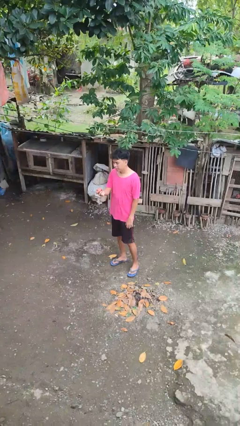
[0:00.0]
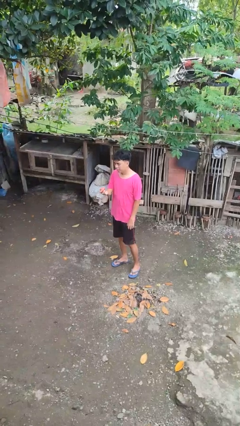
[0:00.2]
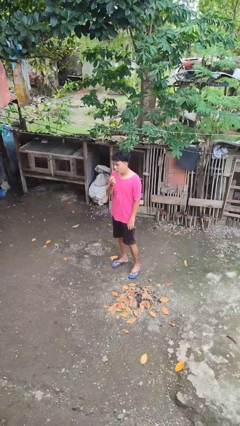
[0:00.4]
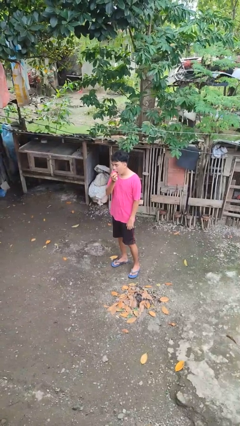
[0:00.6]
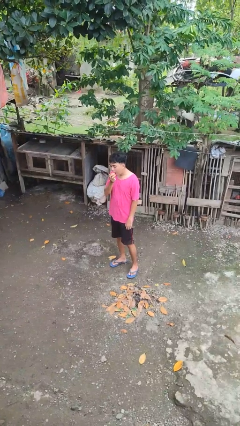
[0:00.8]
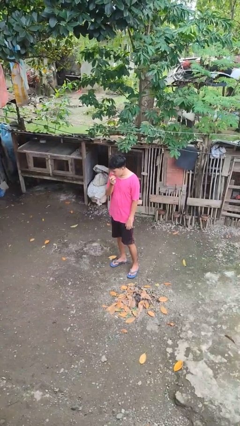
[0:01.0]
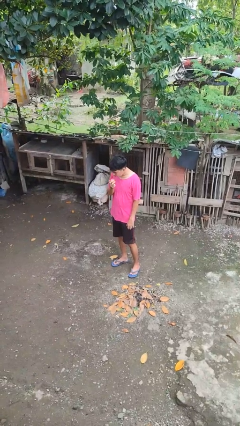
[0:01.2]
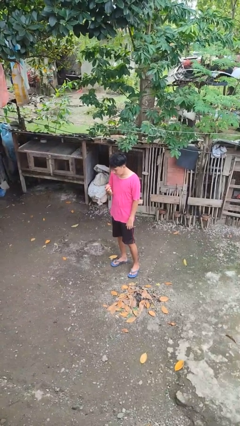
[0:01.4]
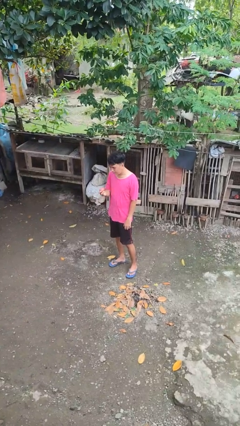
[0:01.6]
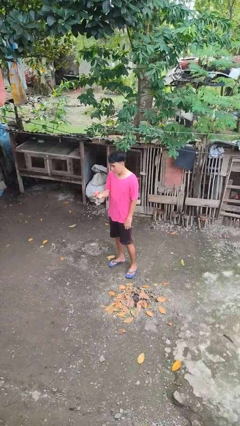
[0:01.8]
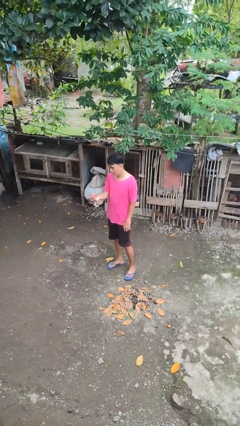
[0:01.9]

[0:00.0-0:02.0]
person eats apple

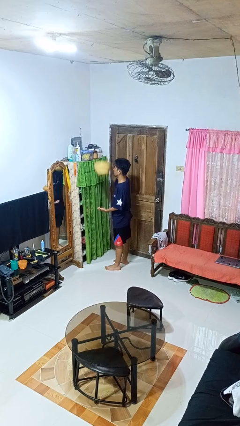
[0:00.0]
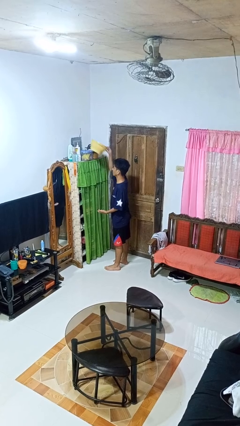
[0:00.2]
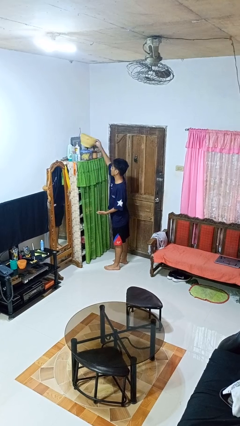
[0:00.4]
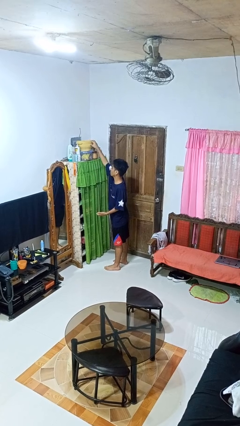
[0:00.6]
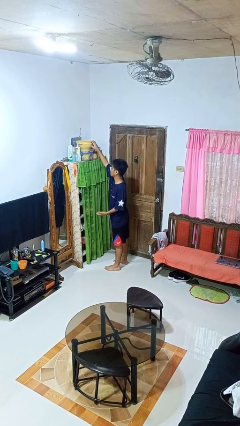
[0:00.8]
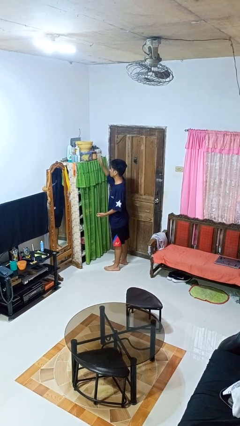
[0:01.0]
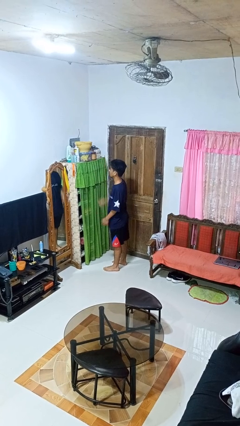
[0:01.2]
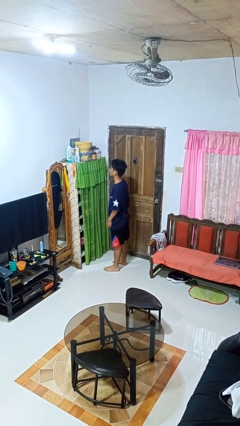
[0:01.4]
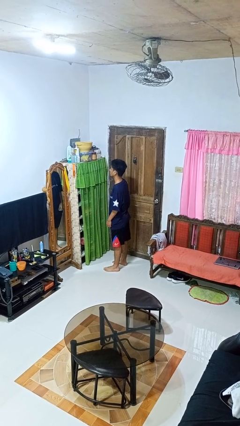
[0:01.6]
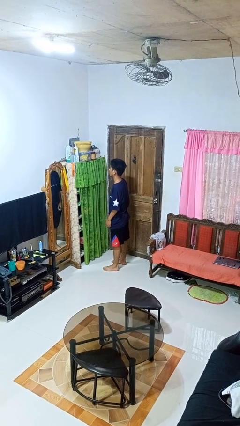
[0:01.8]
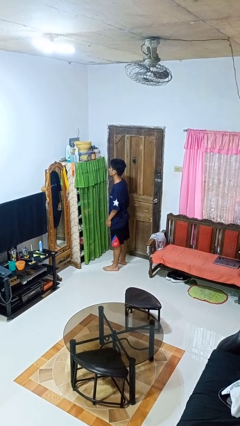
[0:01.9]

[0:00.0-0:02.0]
person puts down object on shelf

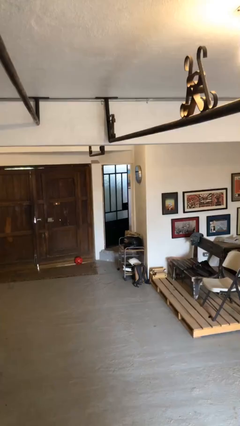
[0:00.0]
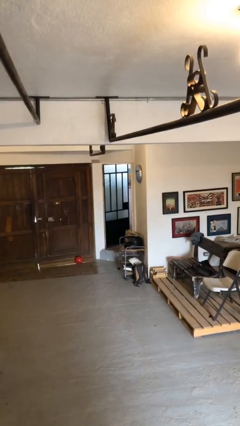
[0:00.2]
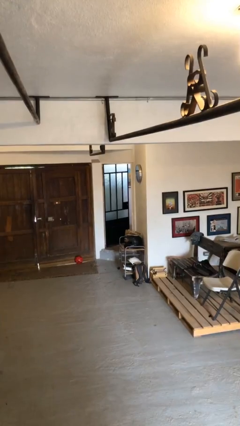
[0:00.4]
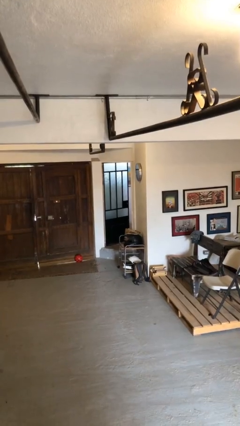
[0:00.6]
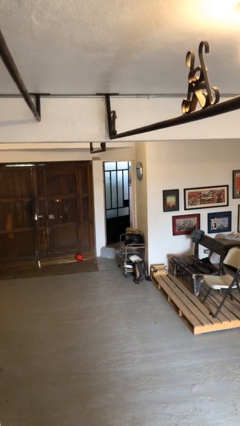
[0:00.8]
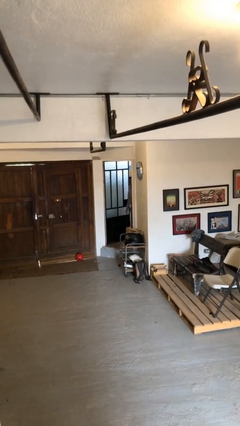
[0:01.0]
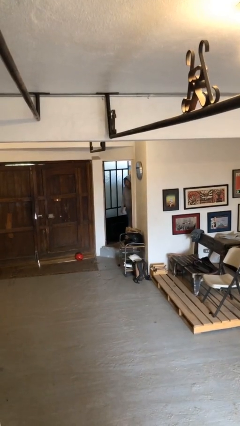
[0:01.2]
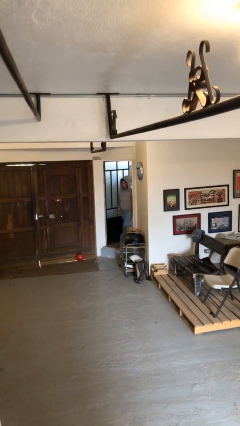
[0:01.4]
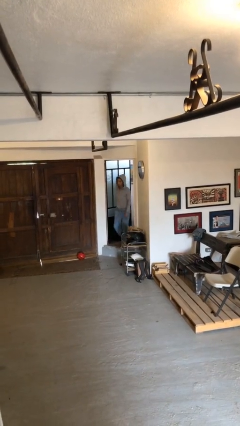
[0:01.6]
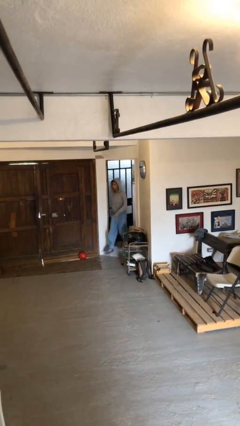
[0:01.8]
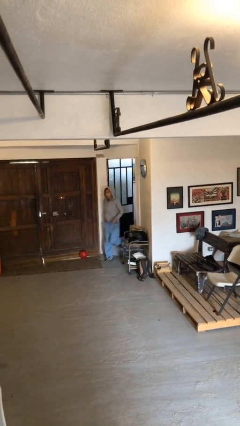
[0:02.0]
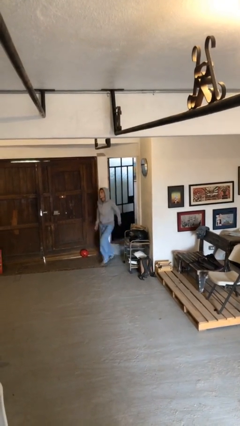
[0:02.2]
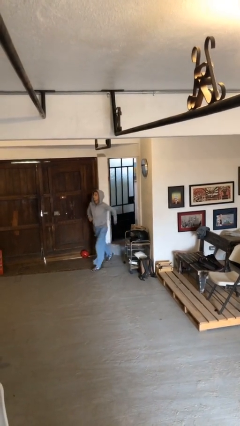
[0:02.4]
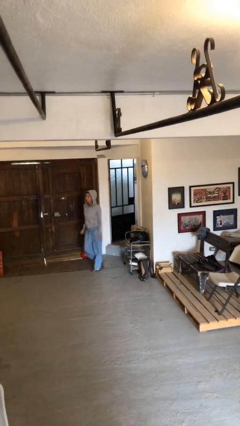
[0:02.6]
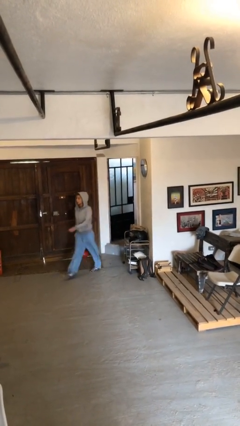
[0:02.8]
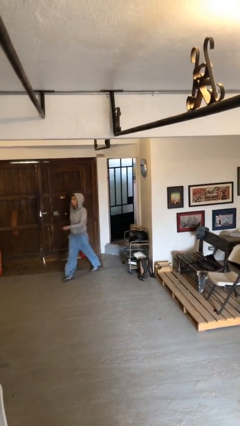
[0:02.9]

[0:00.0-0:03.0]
person enters scene through structure

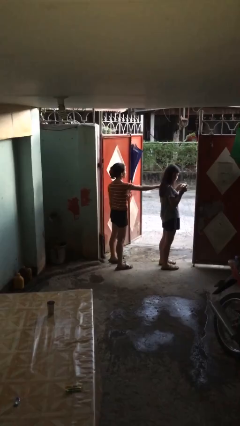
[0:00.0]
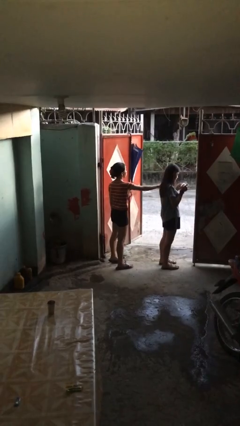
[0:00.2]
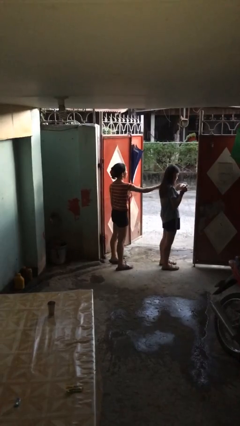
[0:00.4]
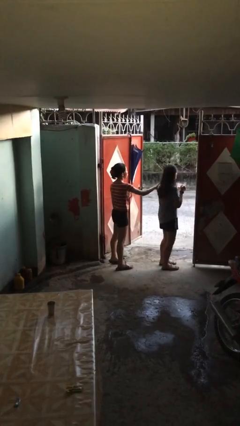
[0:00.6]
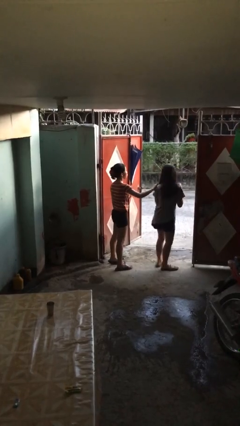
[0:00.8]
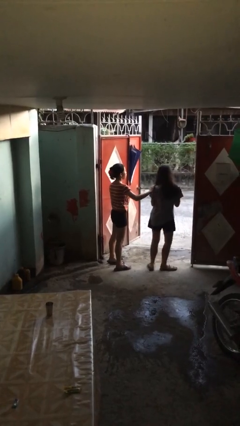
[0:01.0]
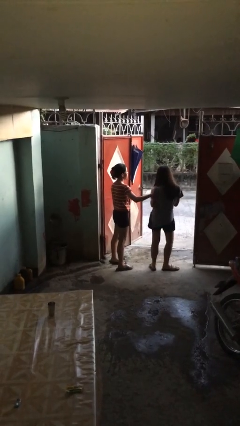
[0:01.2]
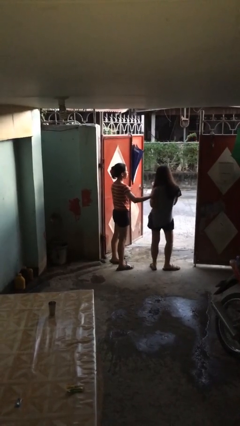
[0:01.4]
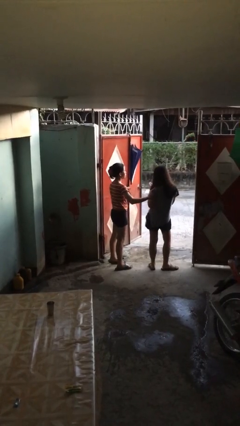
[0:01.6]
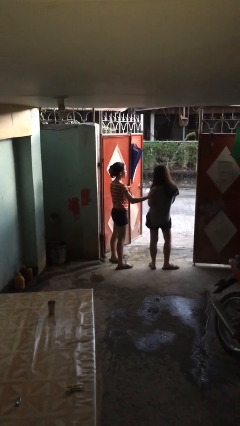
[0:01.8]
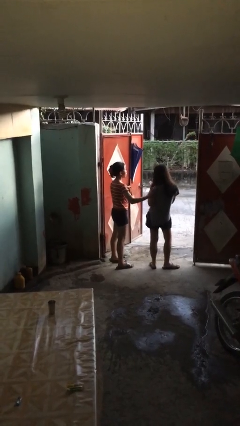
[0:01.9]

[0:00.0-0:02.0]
person spins person around

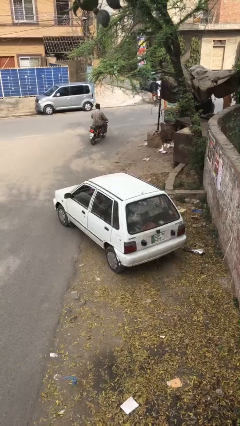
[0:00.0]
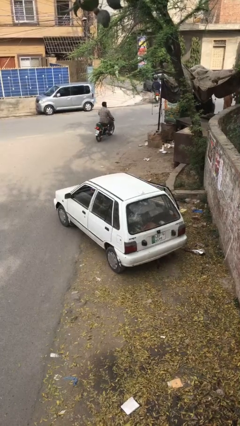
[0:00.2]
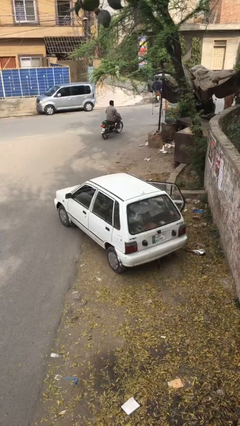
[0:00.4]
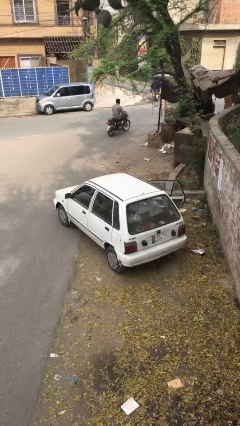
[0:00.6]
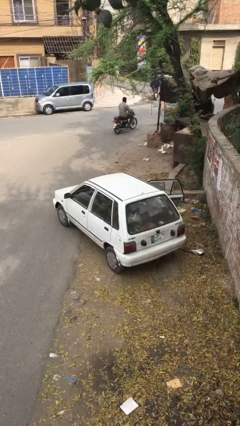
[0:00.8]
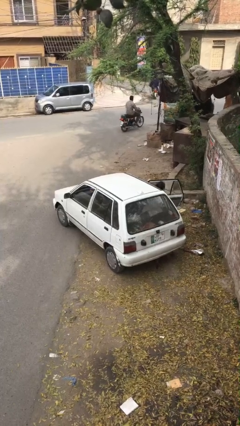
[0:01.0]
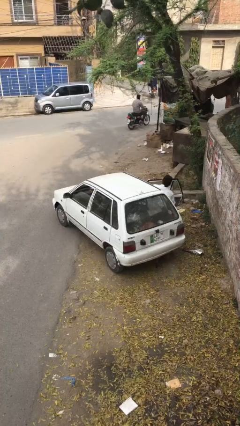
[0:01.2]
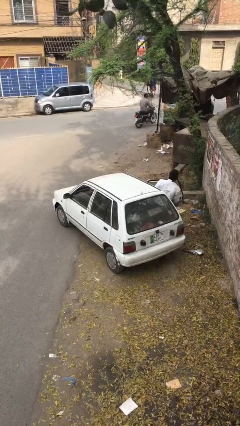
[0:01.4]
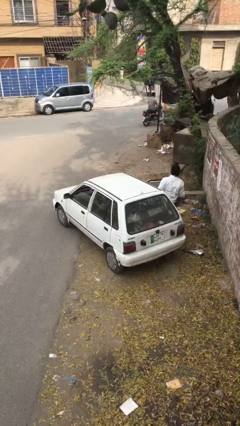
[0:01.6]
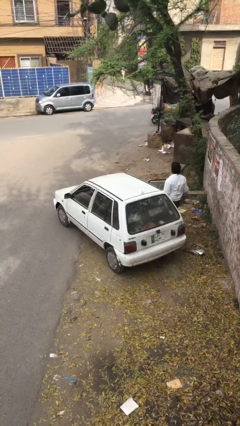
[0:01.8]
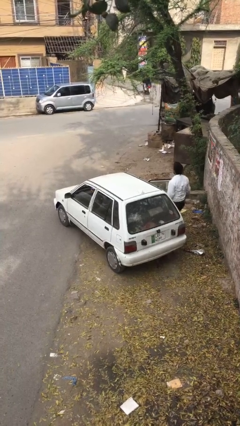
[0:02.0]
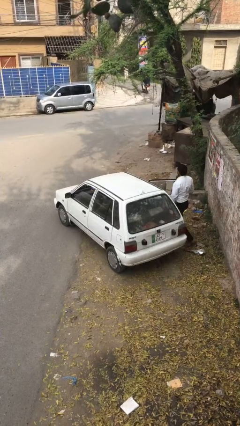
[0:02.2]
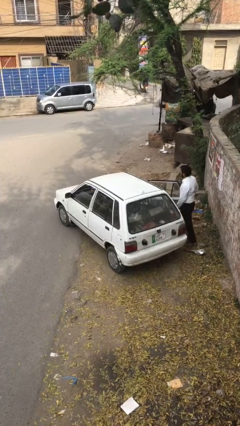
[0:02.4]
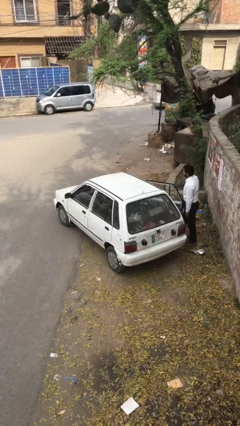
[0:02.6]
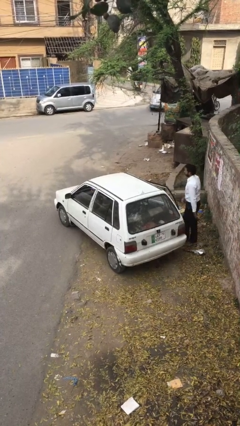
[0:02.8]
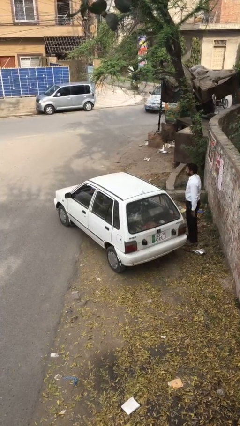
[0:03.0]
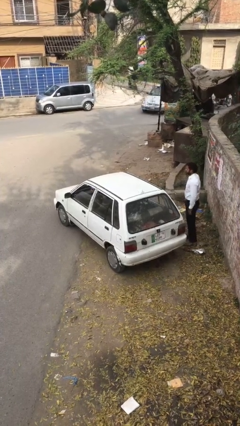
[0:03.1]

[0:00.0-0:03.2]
car drops off person

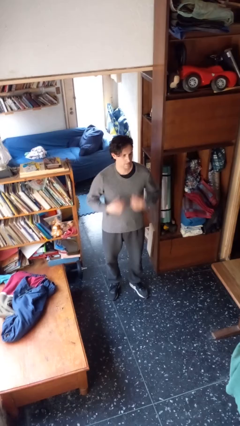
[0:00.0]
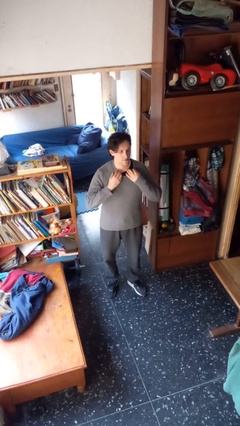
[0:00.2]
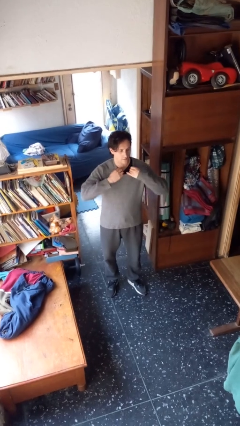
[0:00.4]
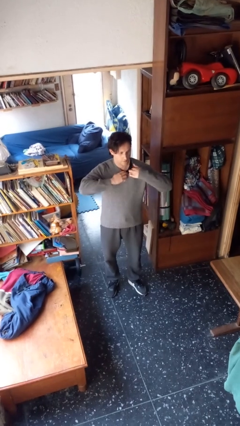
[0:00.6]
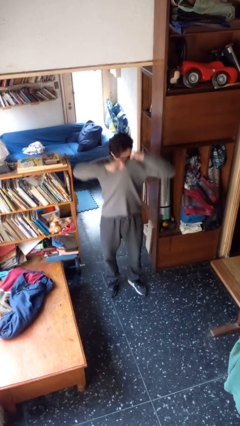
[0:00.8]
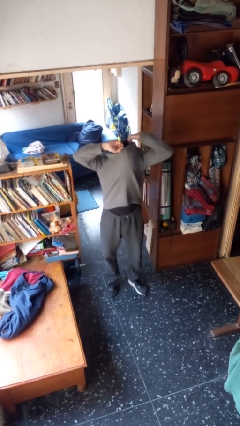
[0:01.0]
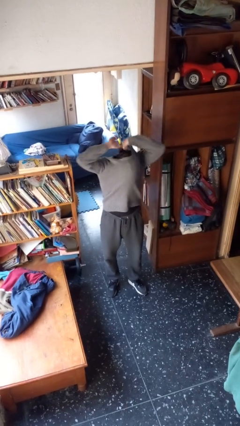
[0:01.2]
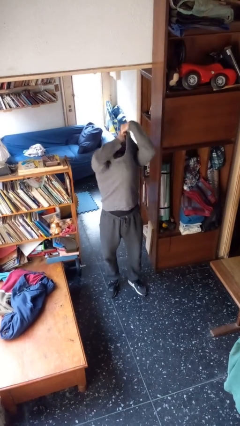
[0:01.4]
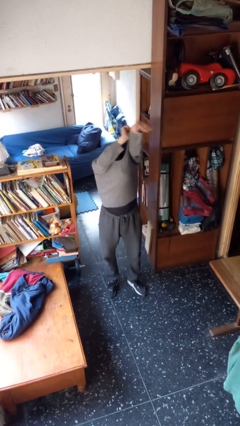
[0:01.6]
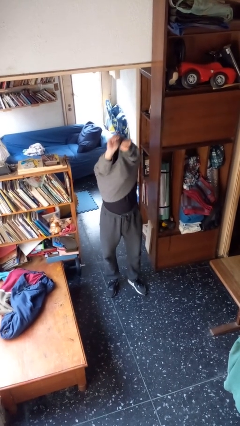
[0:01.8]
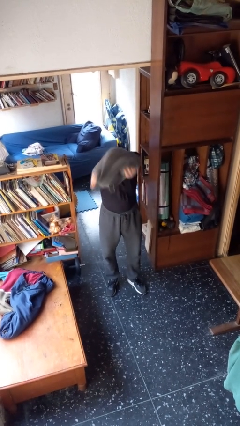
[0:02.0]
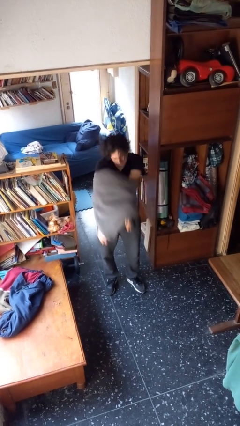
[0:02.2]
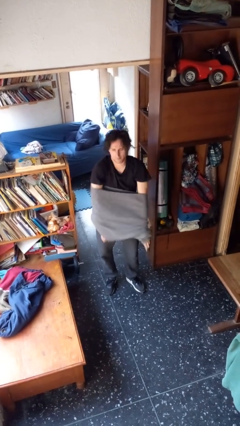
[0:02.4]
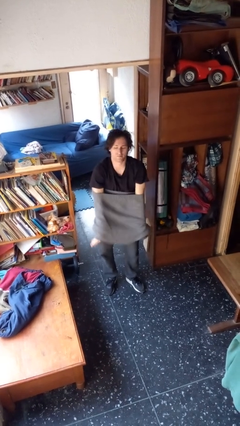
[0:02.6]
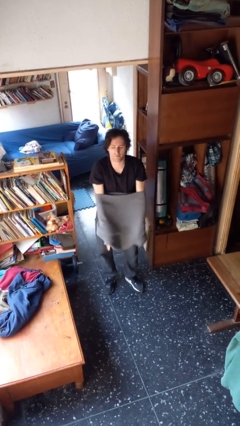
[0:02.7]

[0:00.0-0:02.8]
person takes off shirt

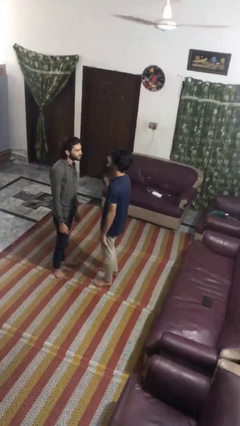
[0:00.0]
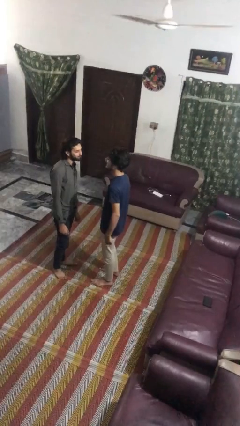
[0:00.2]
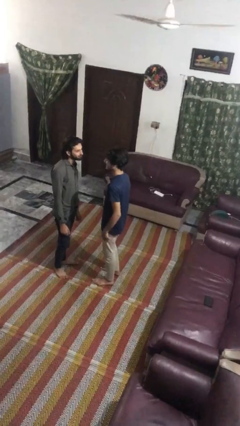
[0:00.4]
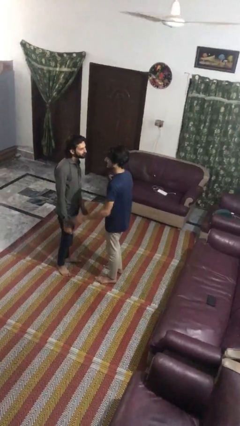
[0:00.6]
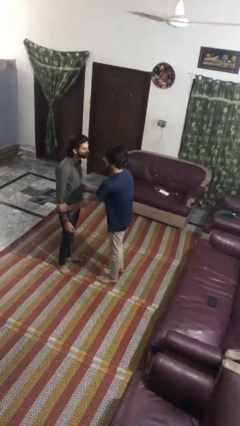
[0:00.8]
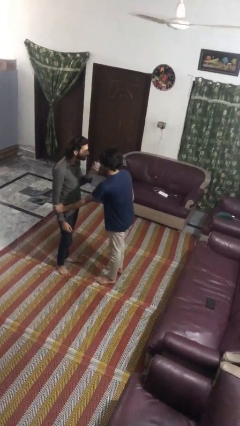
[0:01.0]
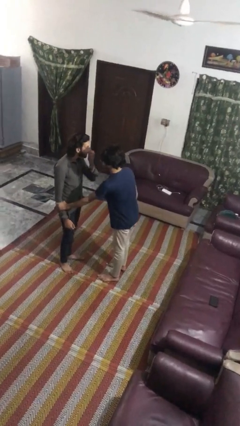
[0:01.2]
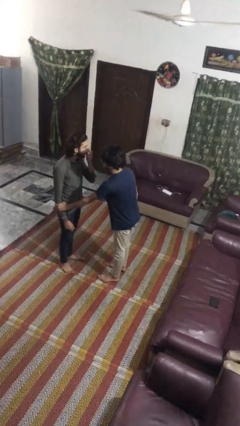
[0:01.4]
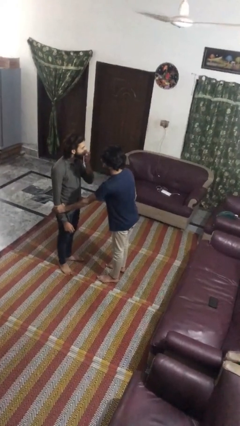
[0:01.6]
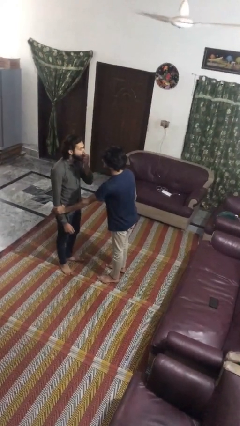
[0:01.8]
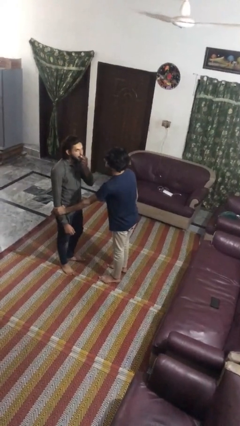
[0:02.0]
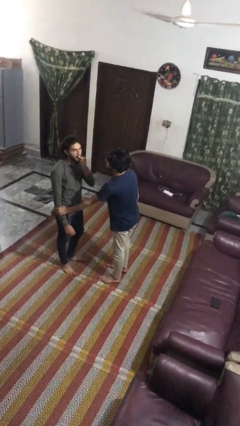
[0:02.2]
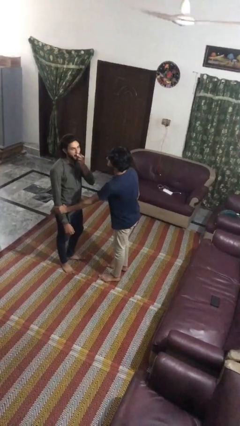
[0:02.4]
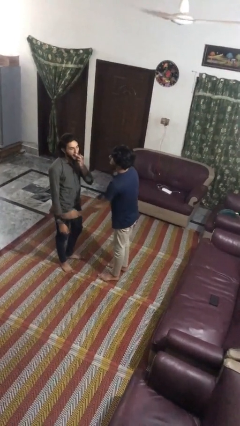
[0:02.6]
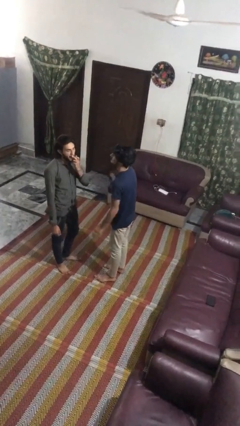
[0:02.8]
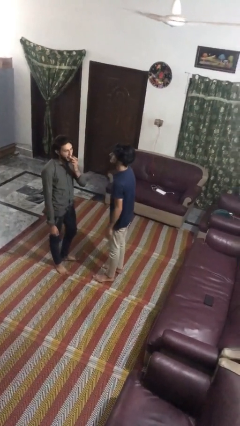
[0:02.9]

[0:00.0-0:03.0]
person grabs person by forearm
